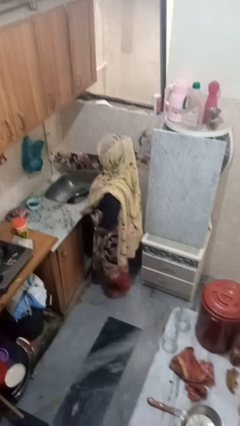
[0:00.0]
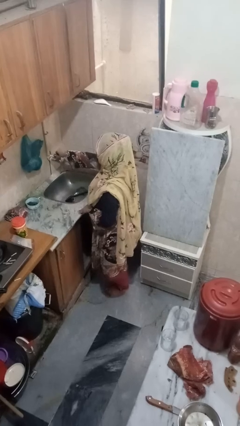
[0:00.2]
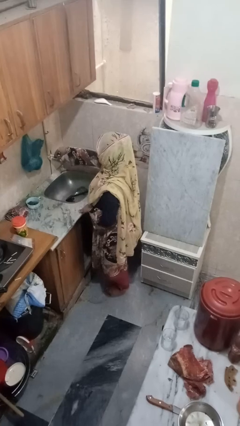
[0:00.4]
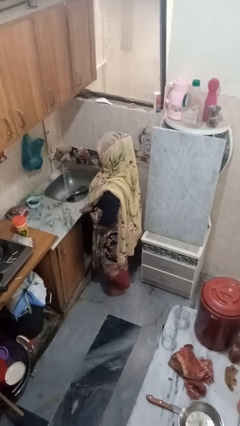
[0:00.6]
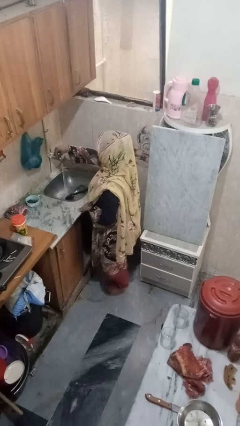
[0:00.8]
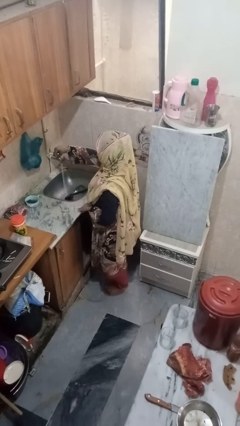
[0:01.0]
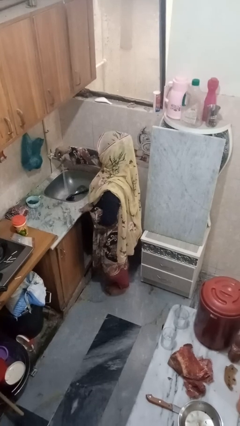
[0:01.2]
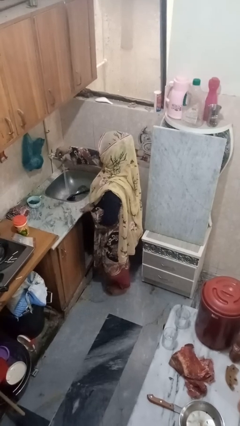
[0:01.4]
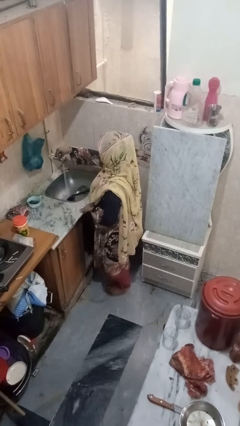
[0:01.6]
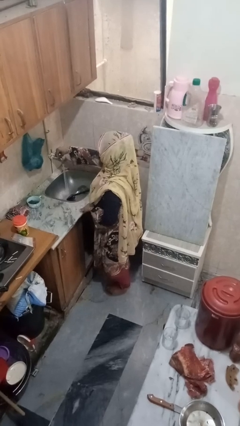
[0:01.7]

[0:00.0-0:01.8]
person turns on faucet

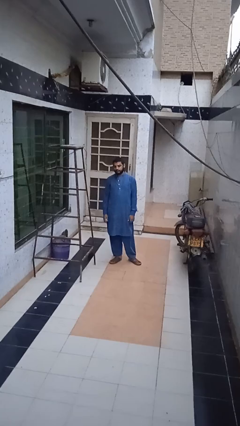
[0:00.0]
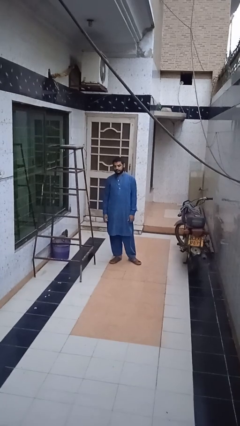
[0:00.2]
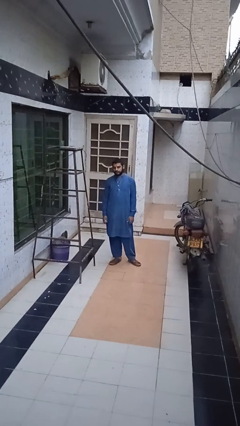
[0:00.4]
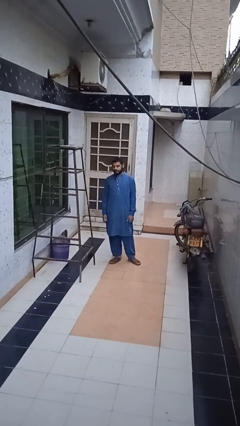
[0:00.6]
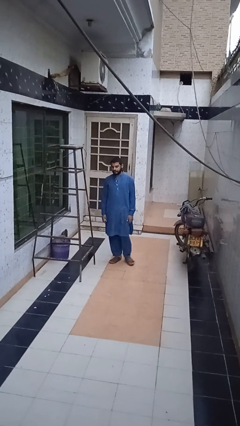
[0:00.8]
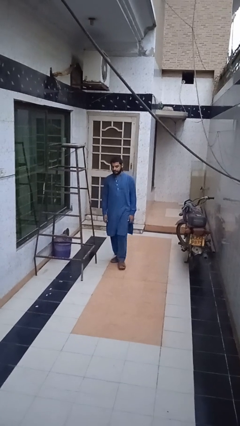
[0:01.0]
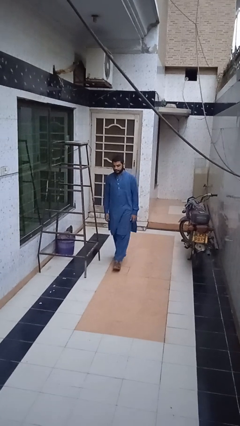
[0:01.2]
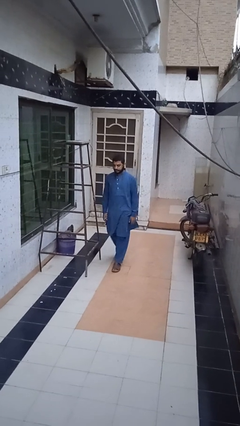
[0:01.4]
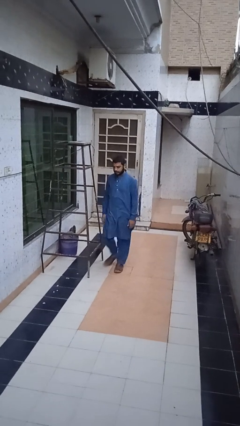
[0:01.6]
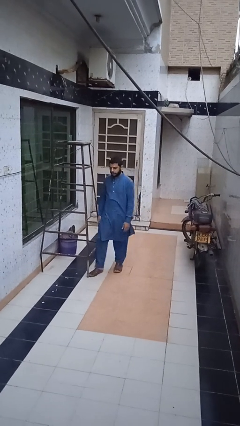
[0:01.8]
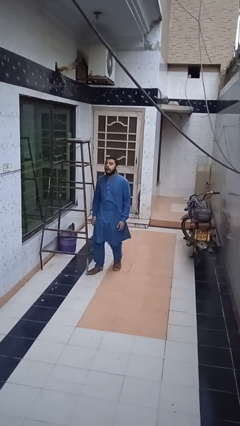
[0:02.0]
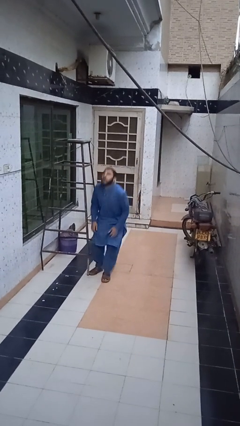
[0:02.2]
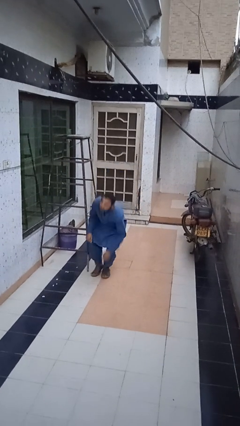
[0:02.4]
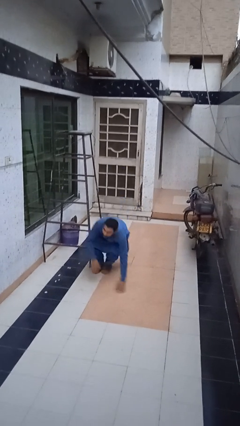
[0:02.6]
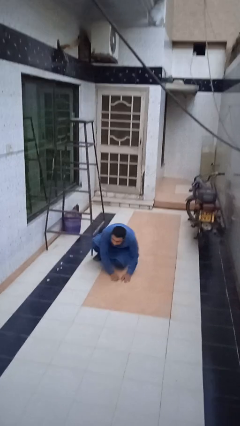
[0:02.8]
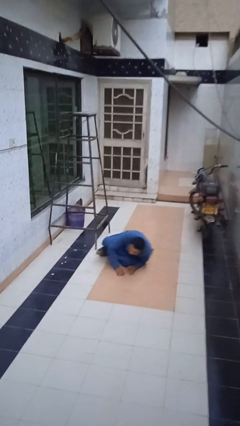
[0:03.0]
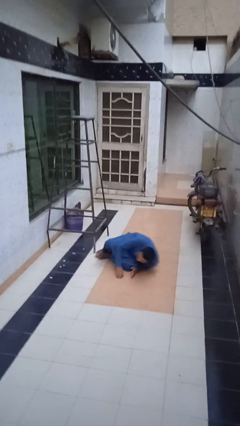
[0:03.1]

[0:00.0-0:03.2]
person trips on object on floor

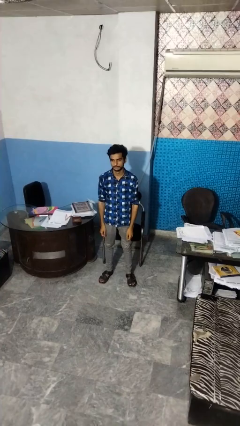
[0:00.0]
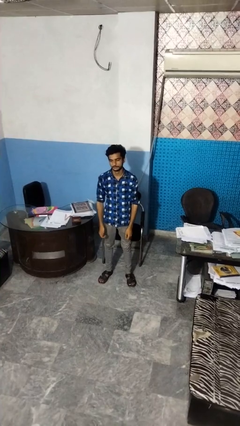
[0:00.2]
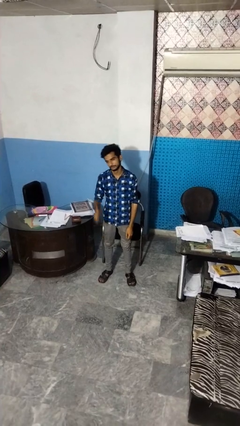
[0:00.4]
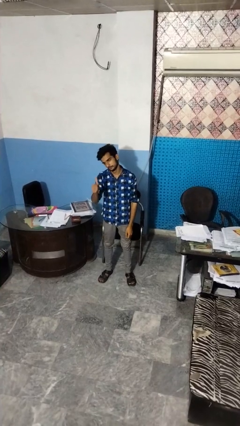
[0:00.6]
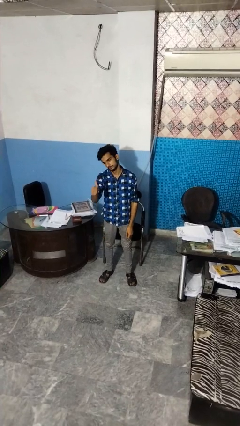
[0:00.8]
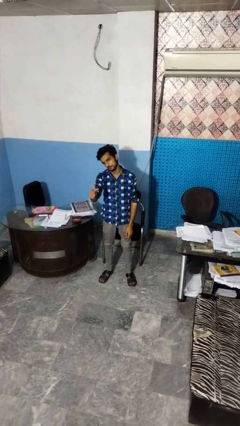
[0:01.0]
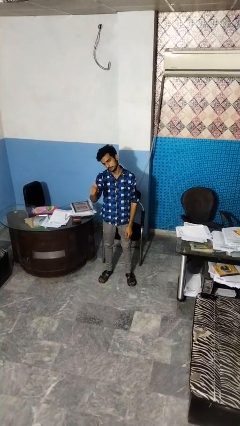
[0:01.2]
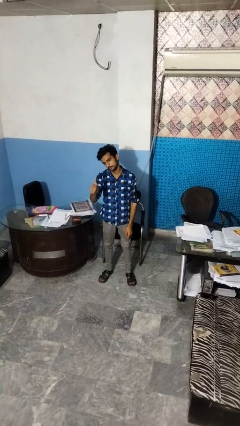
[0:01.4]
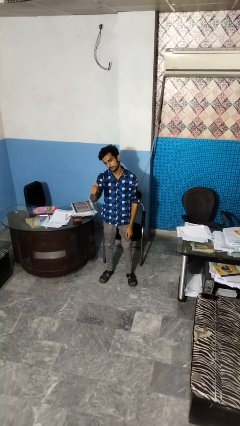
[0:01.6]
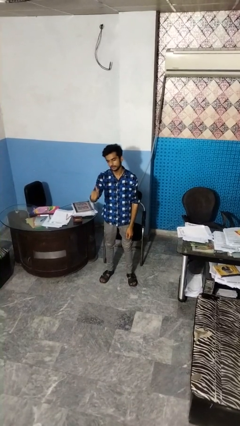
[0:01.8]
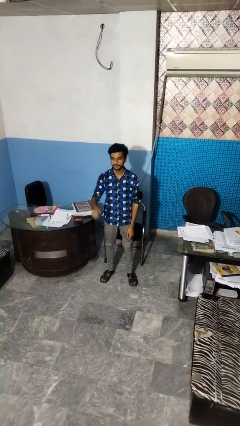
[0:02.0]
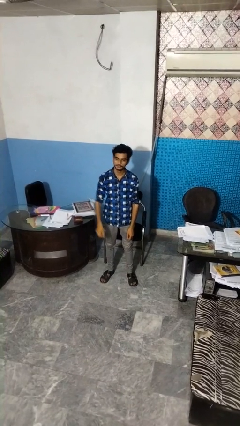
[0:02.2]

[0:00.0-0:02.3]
person gestures thumbs up

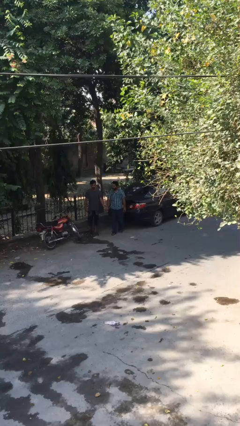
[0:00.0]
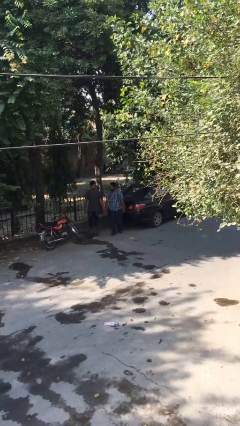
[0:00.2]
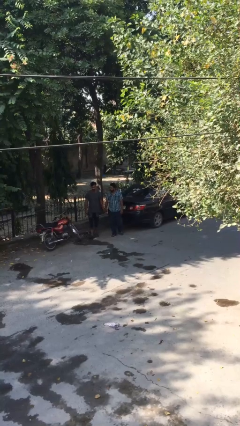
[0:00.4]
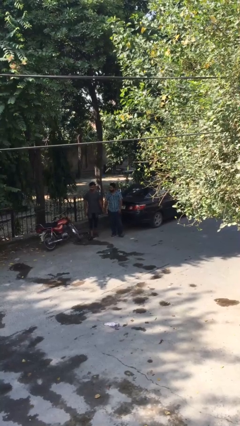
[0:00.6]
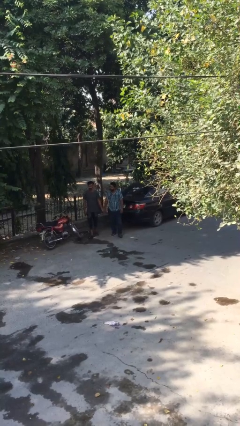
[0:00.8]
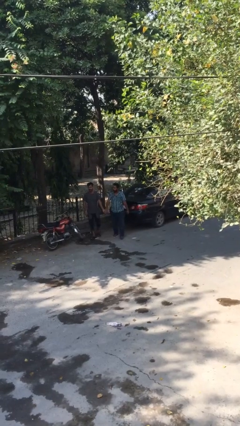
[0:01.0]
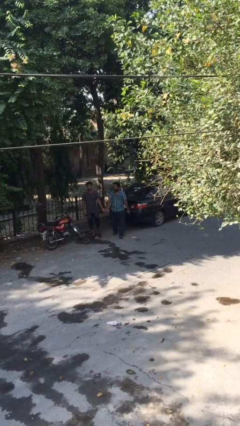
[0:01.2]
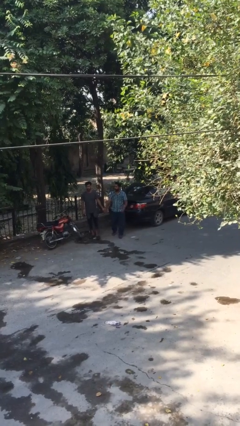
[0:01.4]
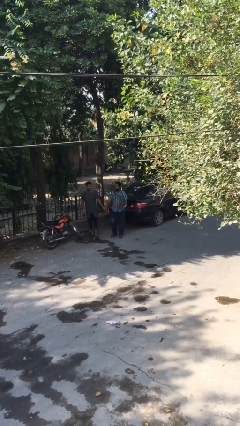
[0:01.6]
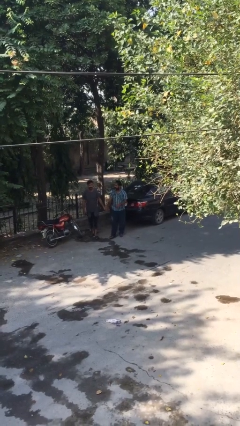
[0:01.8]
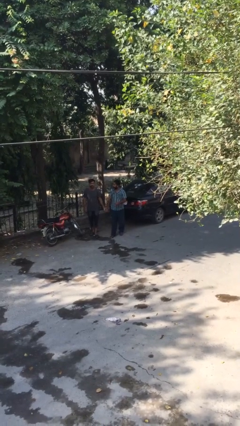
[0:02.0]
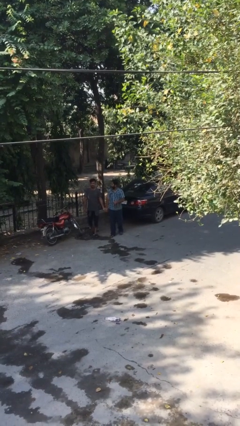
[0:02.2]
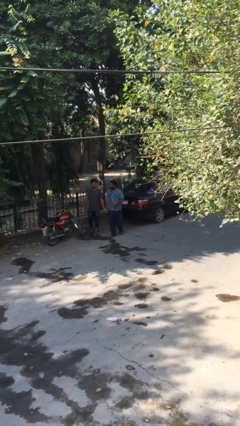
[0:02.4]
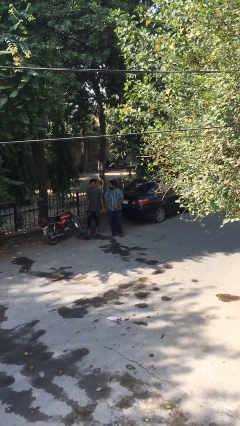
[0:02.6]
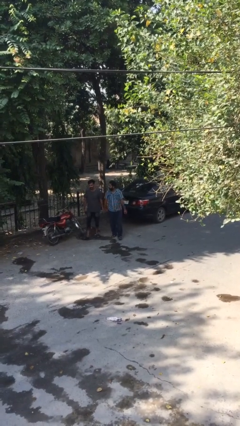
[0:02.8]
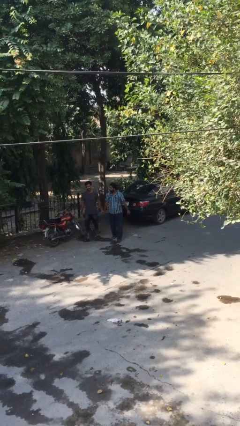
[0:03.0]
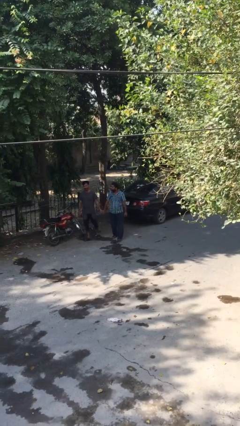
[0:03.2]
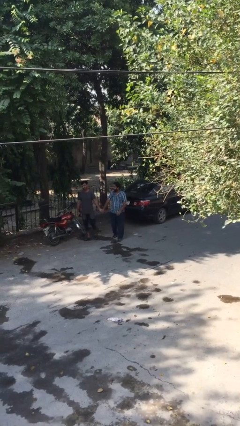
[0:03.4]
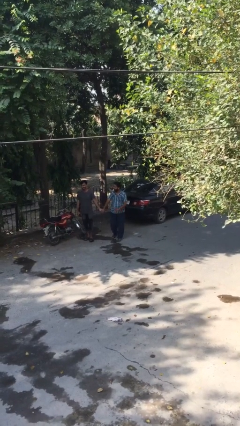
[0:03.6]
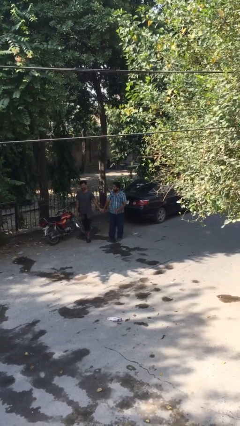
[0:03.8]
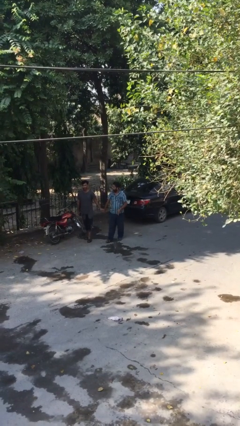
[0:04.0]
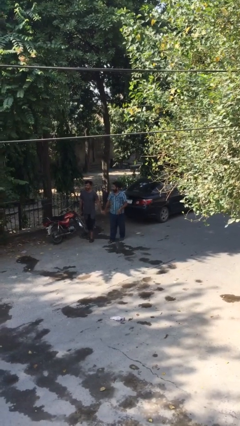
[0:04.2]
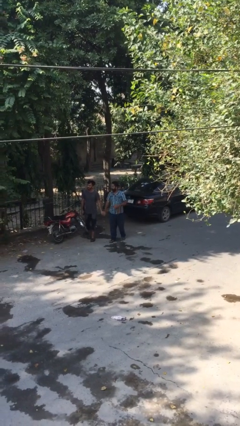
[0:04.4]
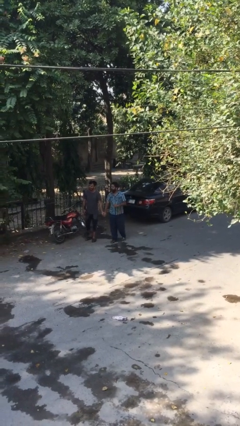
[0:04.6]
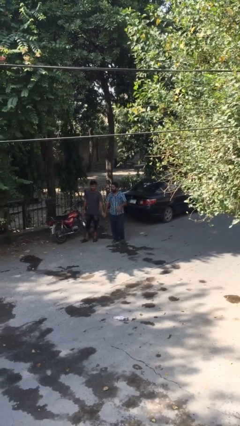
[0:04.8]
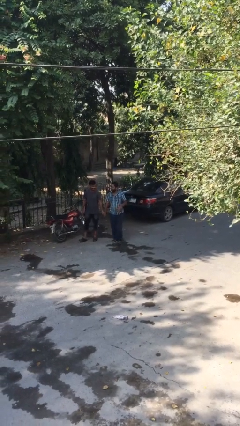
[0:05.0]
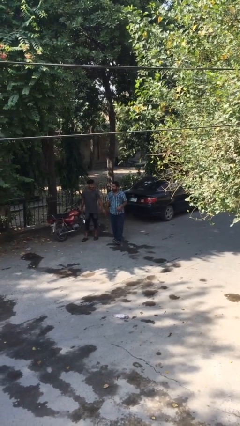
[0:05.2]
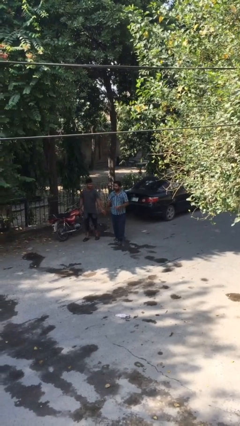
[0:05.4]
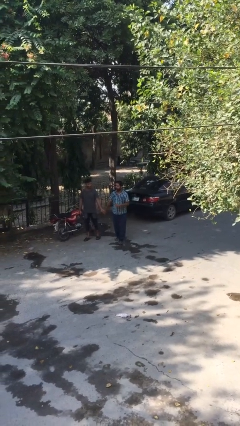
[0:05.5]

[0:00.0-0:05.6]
person holds hand

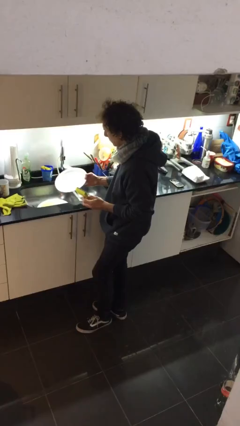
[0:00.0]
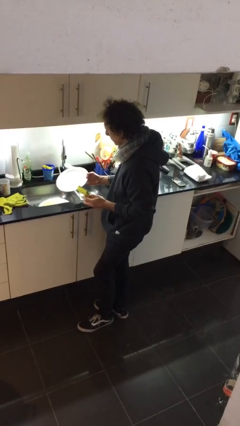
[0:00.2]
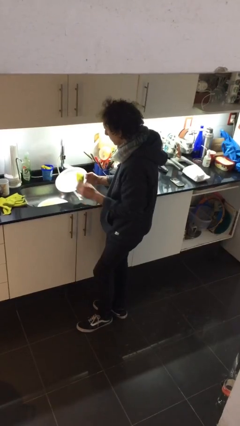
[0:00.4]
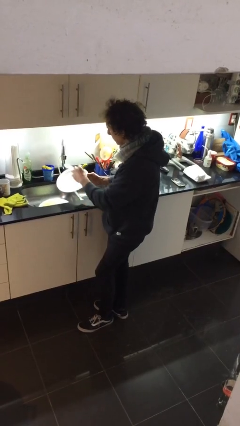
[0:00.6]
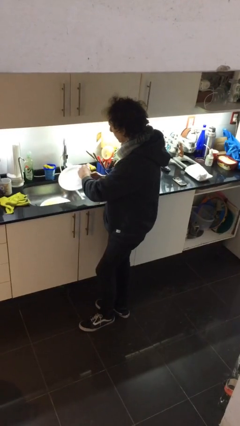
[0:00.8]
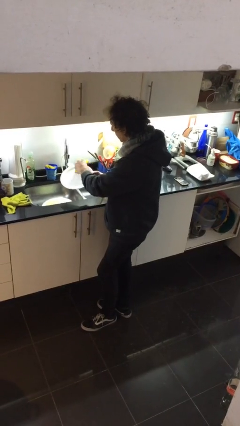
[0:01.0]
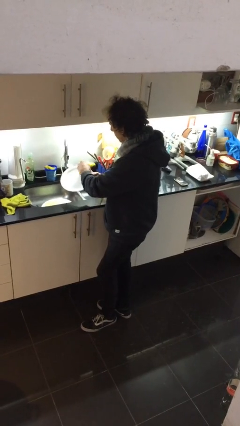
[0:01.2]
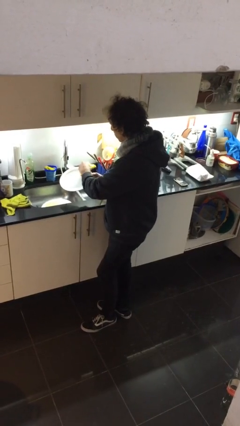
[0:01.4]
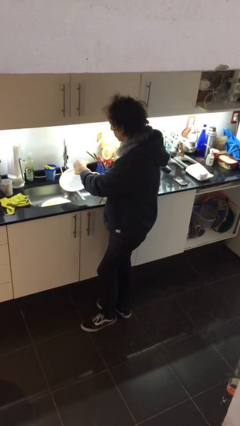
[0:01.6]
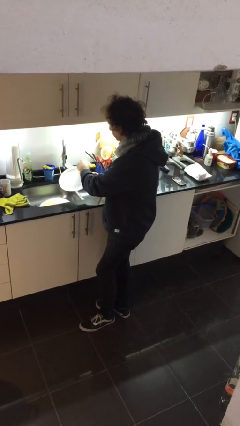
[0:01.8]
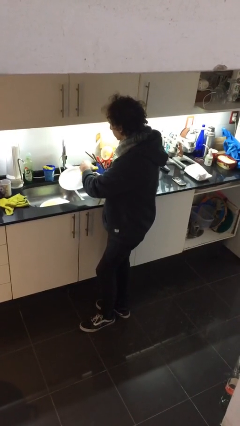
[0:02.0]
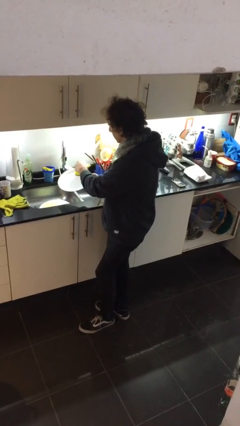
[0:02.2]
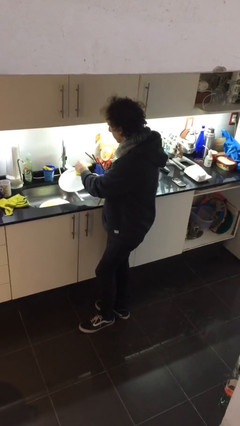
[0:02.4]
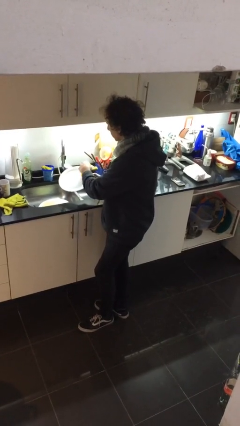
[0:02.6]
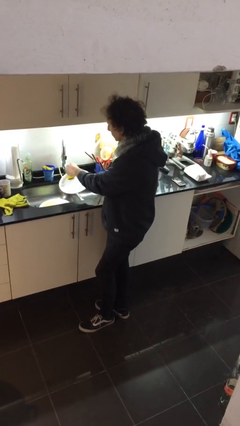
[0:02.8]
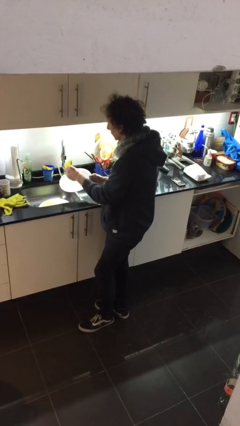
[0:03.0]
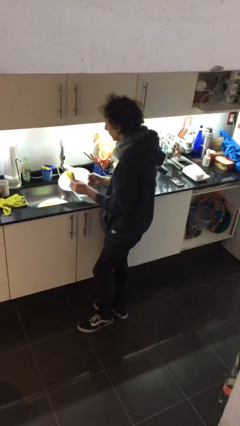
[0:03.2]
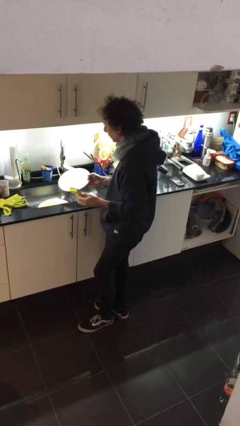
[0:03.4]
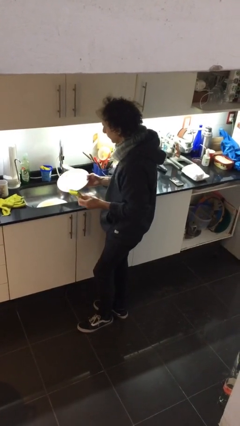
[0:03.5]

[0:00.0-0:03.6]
person washes dish

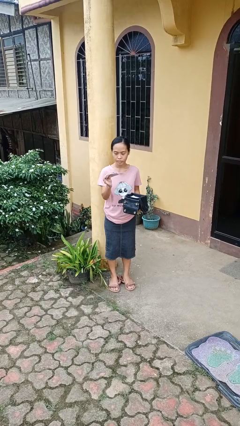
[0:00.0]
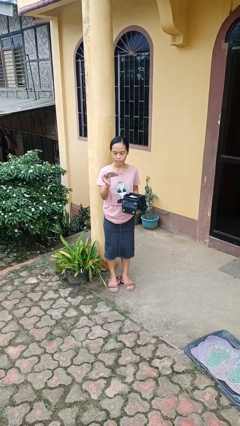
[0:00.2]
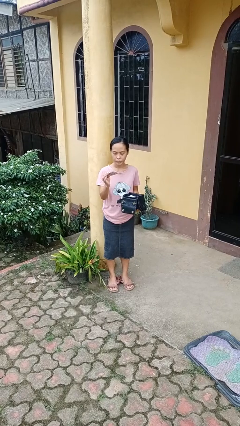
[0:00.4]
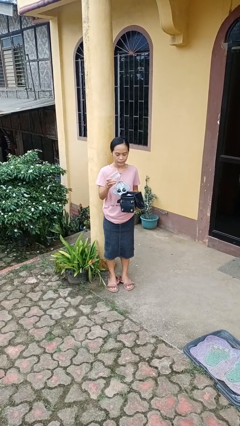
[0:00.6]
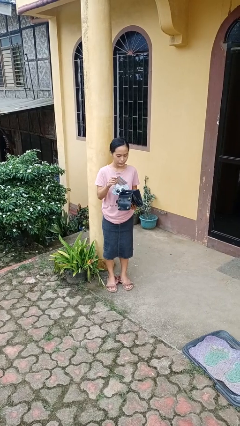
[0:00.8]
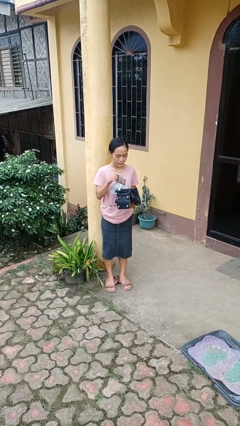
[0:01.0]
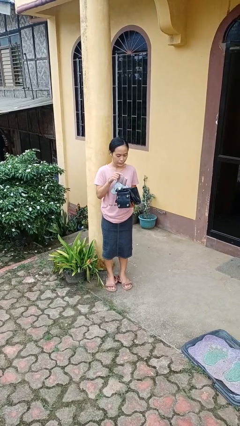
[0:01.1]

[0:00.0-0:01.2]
person takes object from purse
